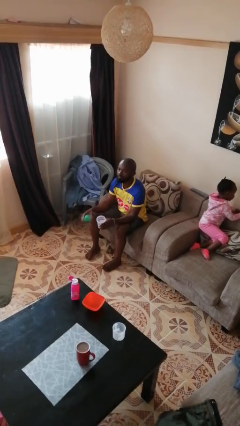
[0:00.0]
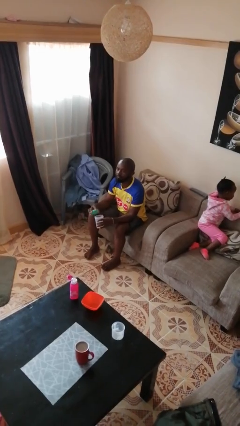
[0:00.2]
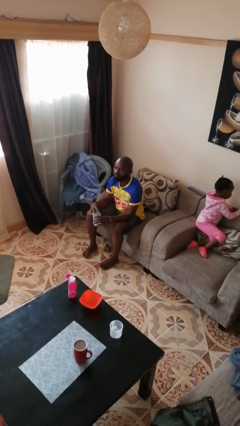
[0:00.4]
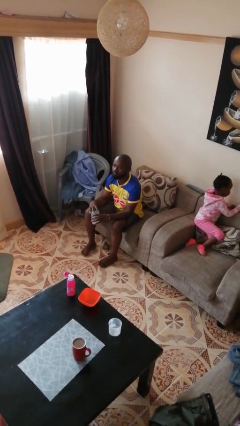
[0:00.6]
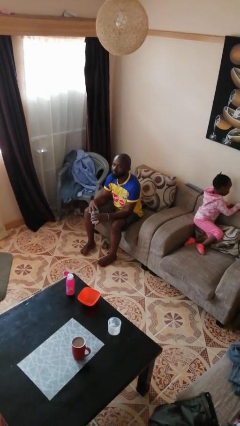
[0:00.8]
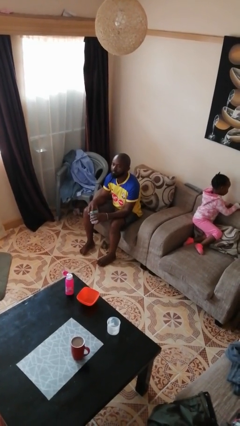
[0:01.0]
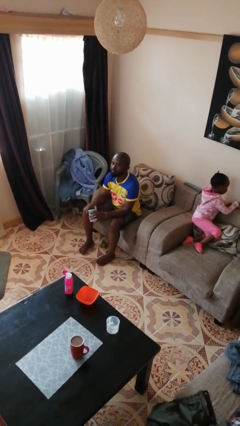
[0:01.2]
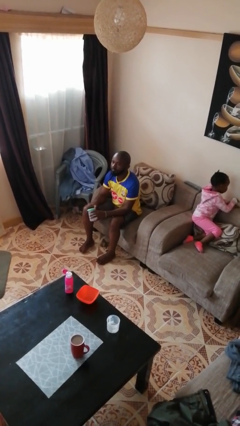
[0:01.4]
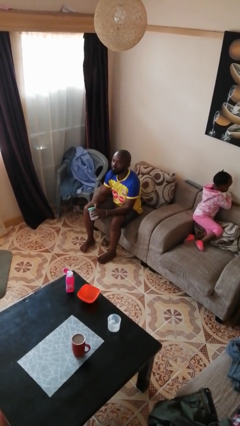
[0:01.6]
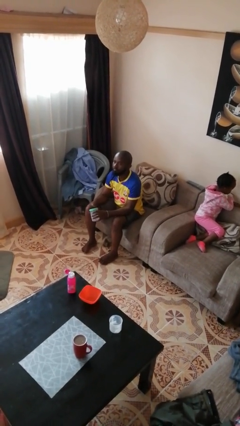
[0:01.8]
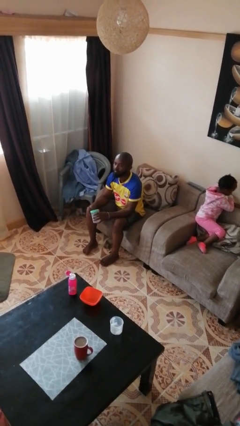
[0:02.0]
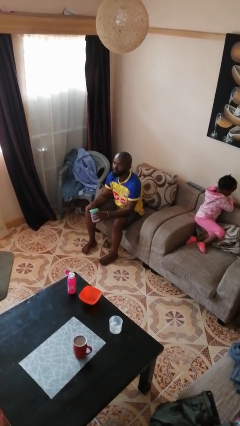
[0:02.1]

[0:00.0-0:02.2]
person closes jar

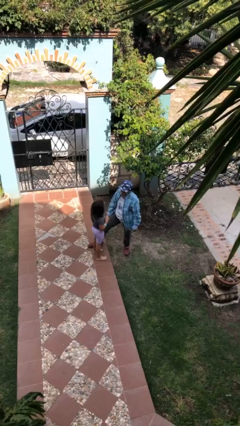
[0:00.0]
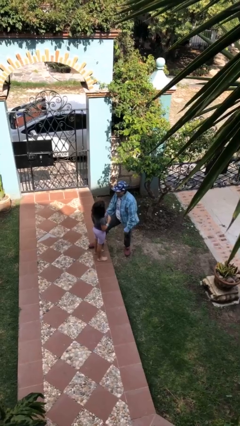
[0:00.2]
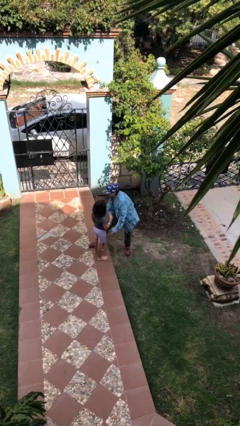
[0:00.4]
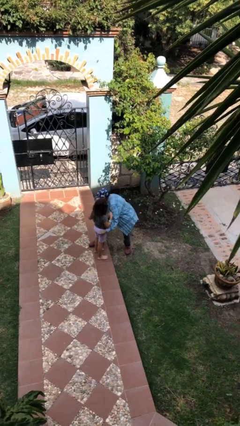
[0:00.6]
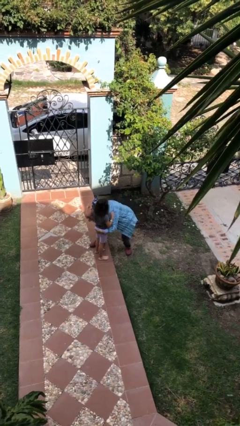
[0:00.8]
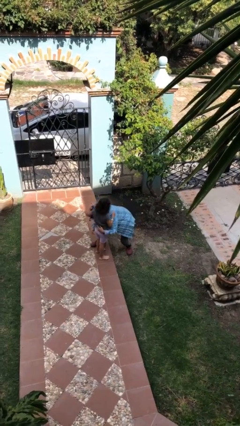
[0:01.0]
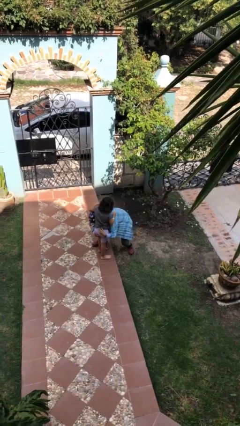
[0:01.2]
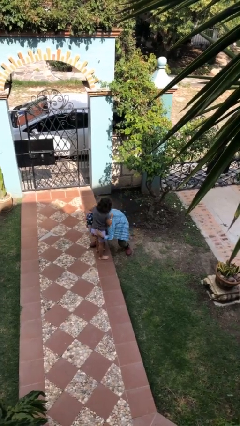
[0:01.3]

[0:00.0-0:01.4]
person carries person over shoulder

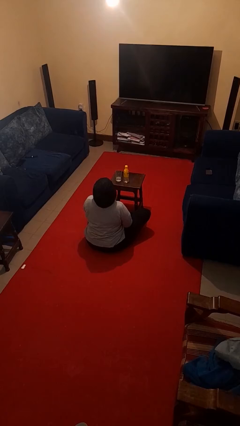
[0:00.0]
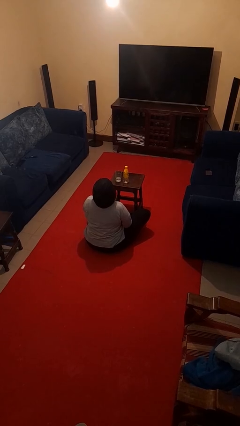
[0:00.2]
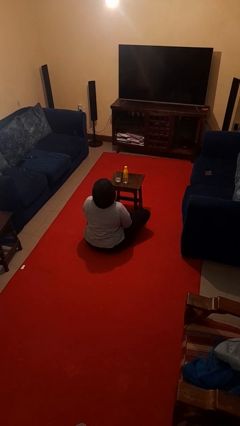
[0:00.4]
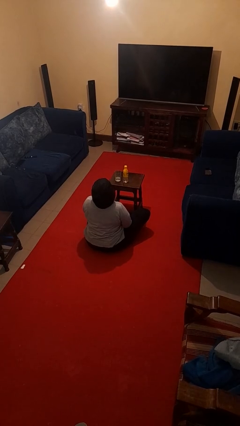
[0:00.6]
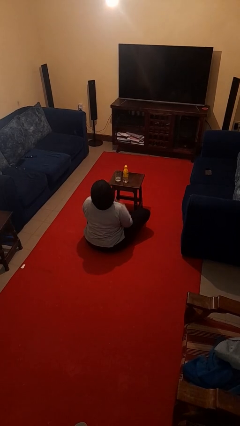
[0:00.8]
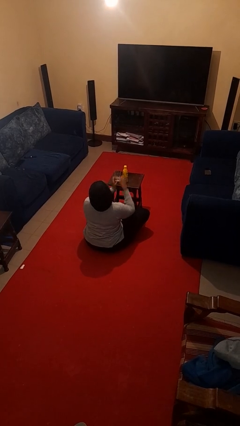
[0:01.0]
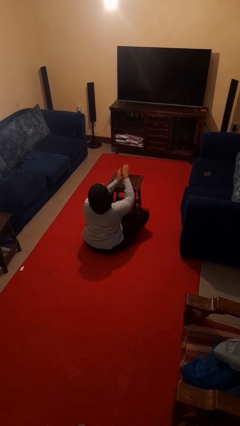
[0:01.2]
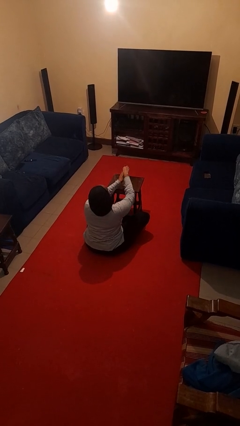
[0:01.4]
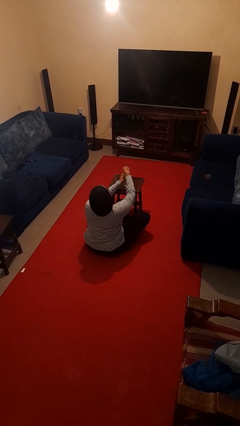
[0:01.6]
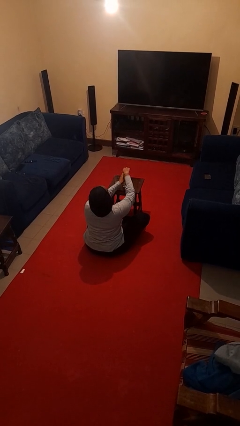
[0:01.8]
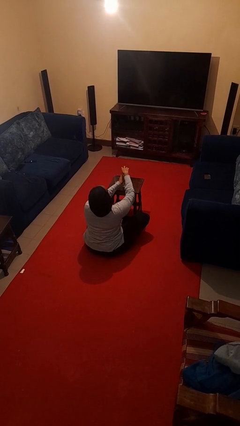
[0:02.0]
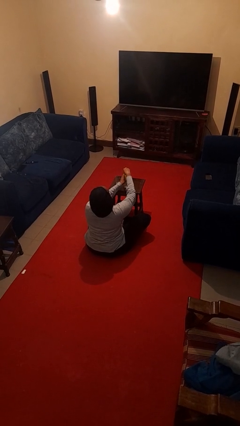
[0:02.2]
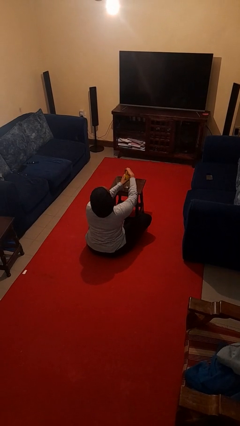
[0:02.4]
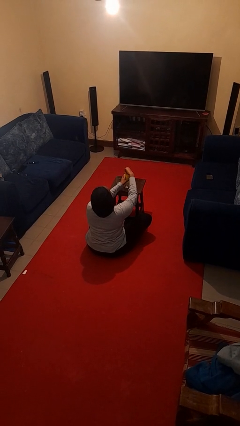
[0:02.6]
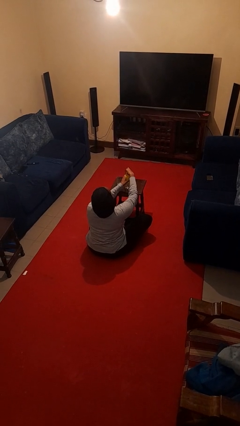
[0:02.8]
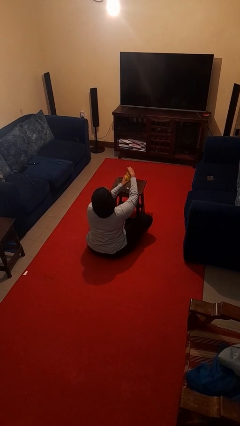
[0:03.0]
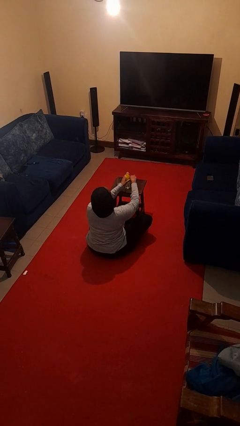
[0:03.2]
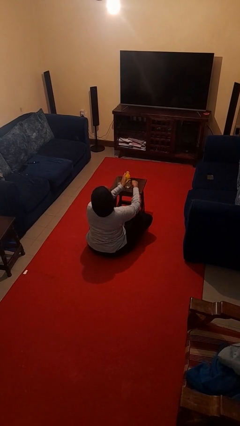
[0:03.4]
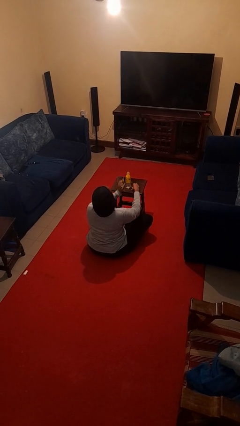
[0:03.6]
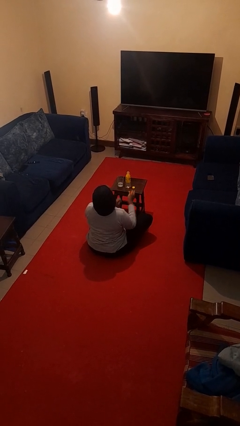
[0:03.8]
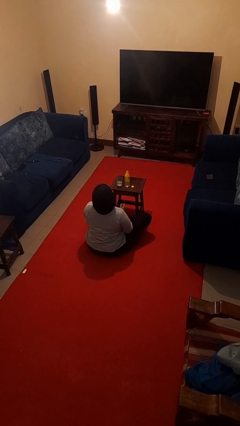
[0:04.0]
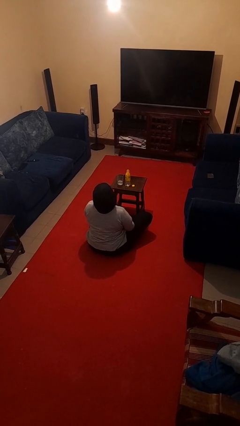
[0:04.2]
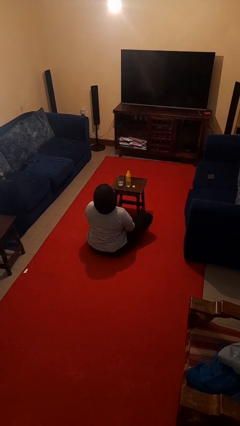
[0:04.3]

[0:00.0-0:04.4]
person unscrews lid from bottle

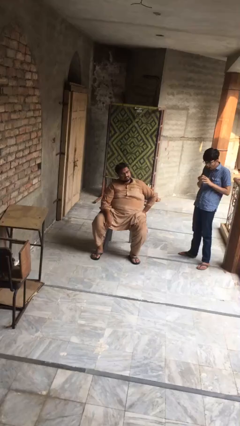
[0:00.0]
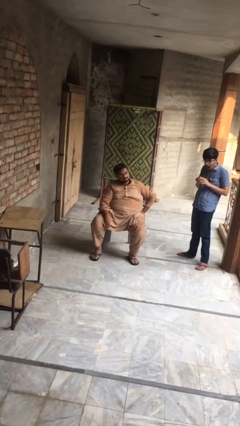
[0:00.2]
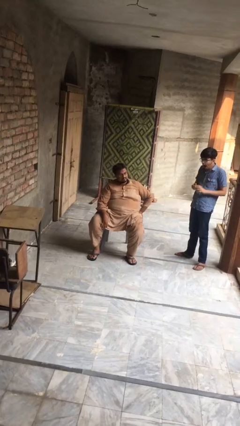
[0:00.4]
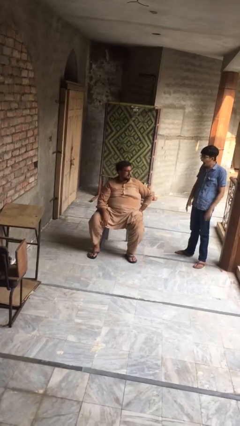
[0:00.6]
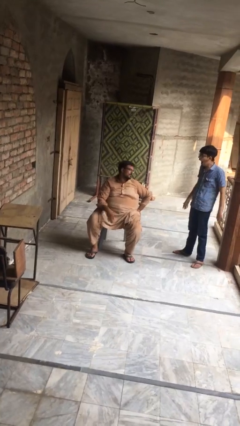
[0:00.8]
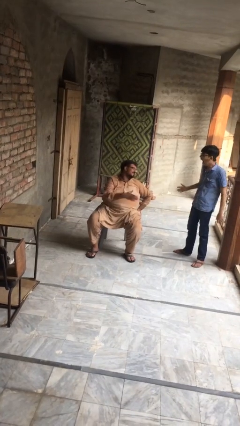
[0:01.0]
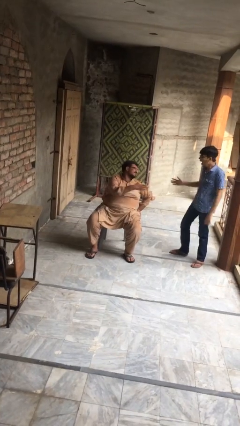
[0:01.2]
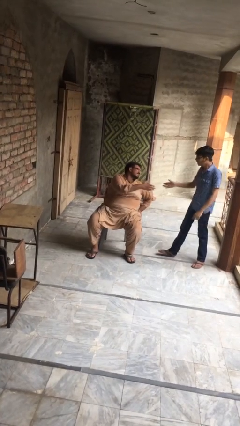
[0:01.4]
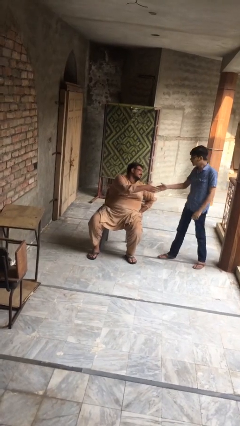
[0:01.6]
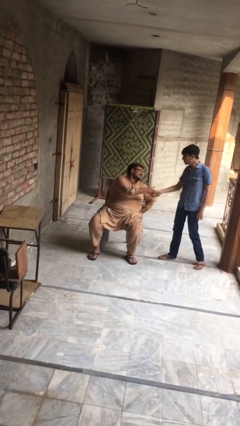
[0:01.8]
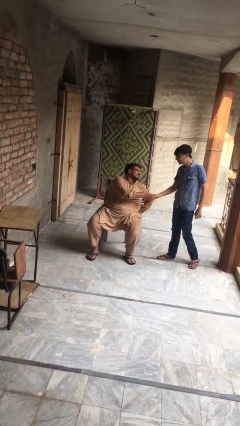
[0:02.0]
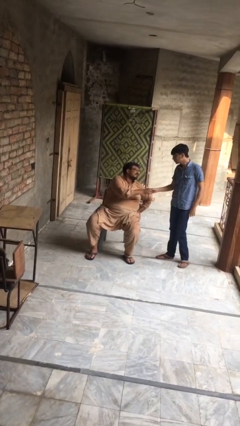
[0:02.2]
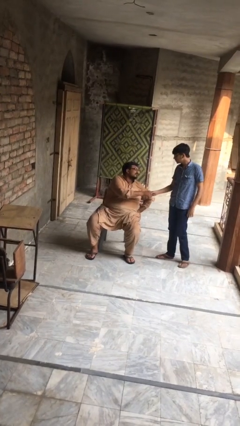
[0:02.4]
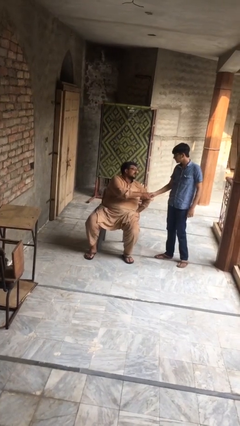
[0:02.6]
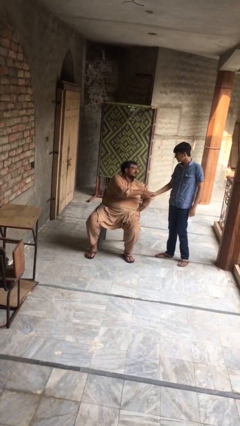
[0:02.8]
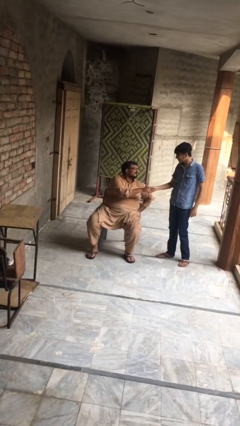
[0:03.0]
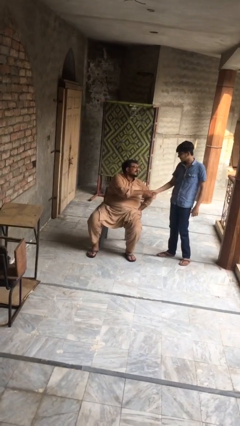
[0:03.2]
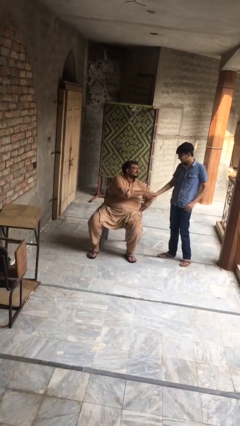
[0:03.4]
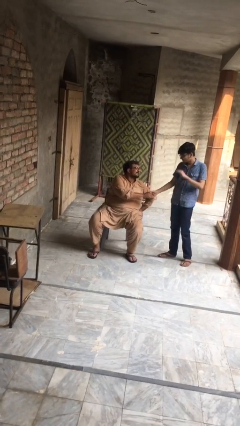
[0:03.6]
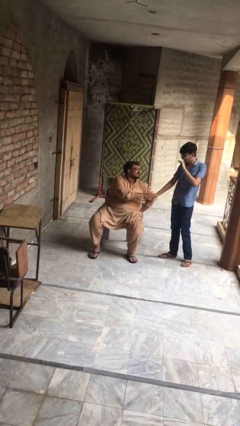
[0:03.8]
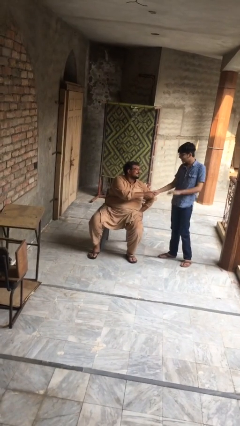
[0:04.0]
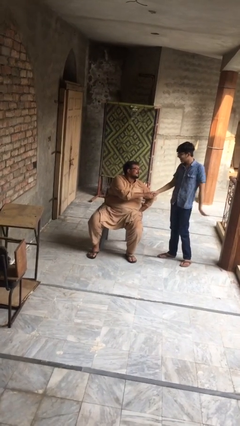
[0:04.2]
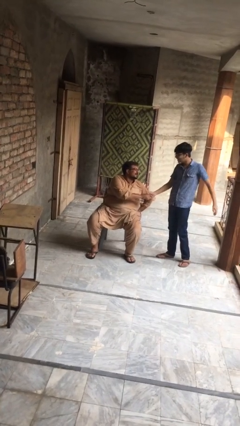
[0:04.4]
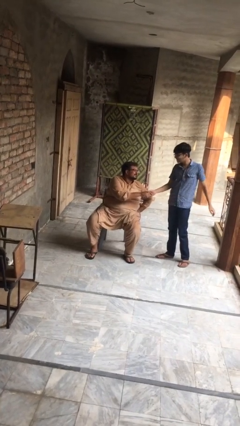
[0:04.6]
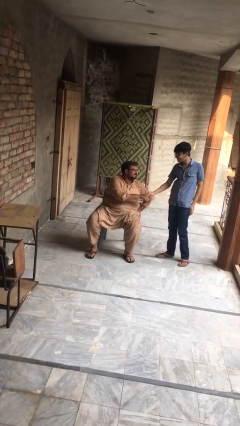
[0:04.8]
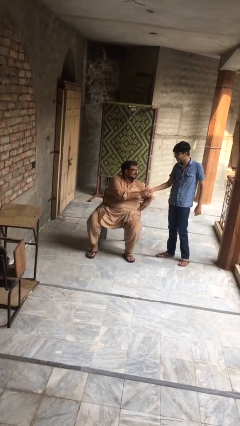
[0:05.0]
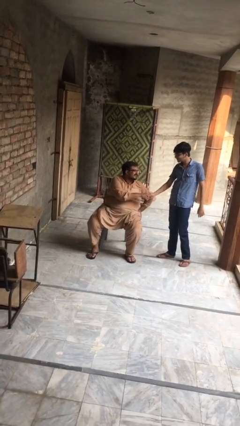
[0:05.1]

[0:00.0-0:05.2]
person shakes hand

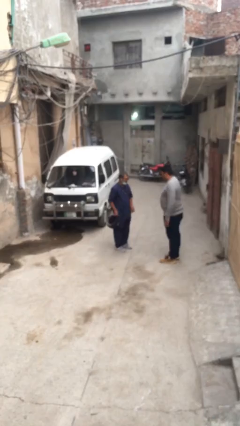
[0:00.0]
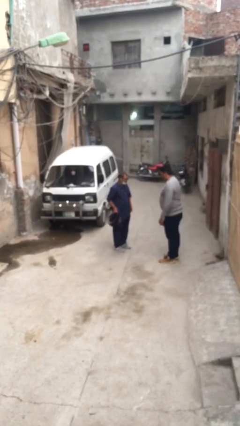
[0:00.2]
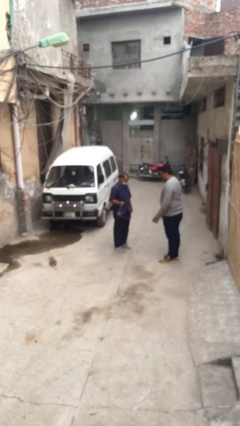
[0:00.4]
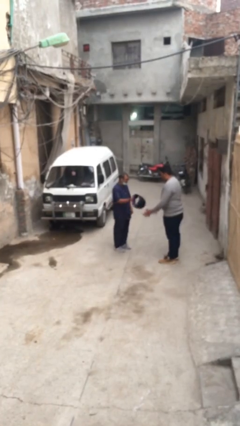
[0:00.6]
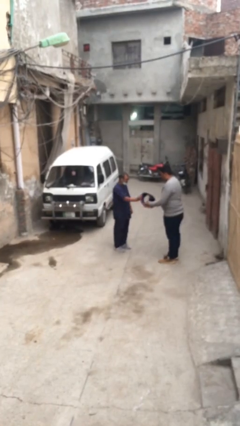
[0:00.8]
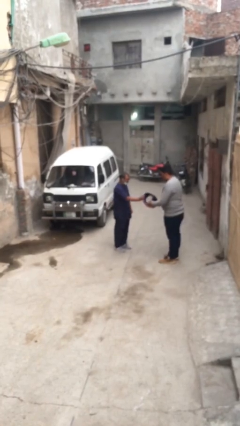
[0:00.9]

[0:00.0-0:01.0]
person transfers object to person

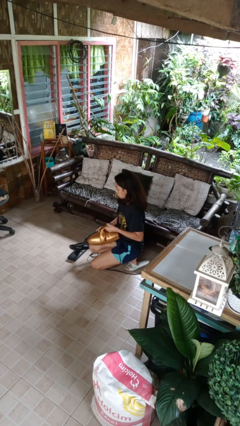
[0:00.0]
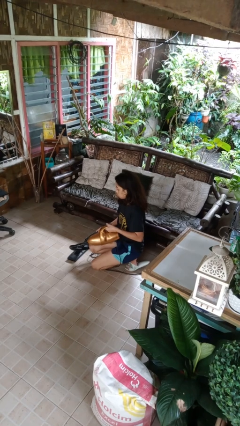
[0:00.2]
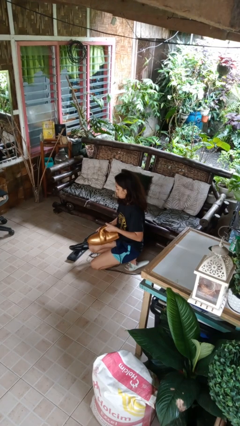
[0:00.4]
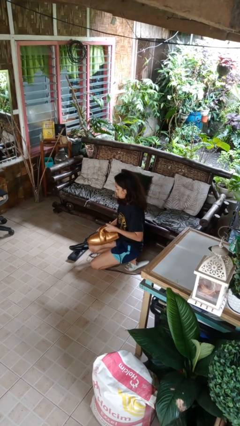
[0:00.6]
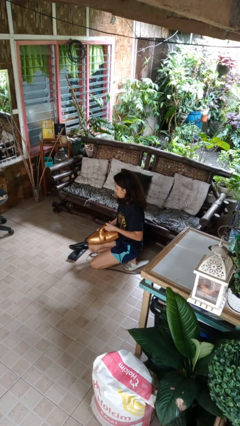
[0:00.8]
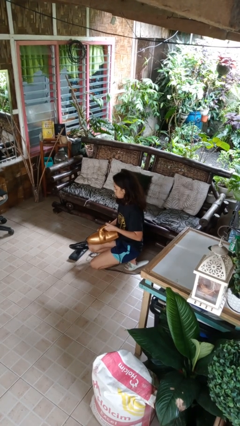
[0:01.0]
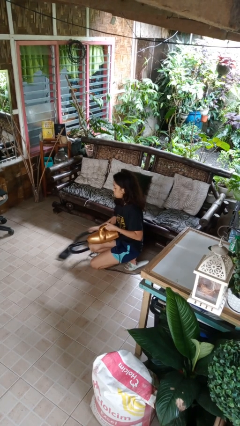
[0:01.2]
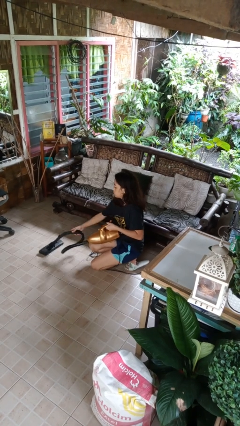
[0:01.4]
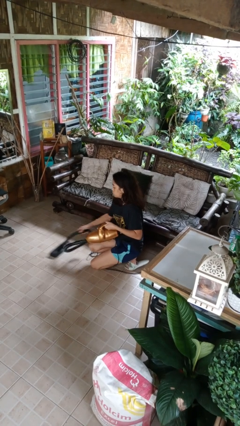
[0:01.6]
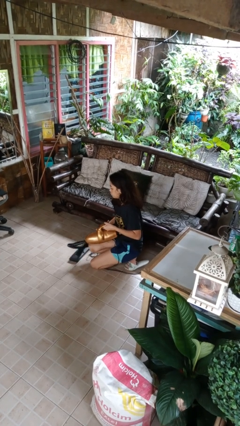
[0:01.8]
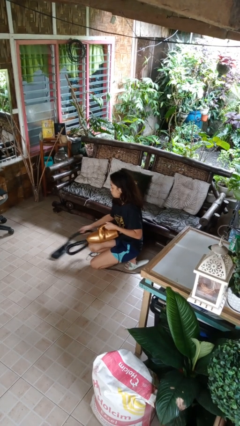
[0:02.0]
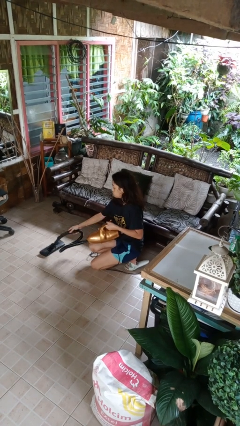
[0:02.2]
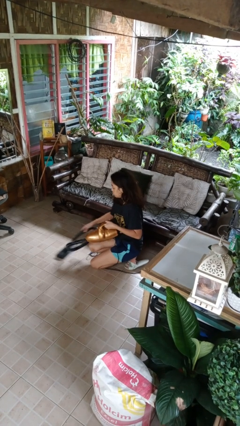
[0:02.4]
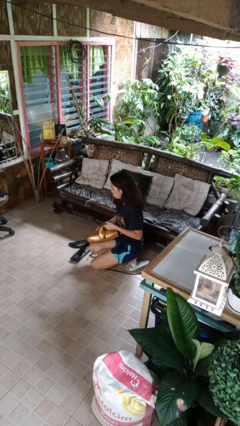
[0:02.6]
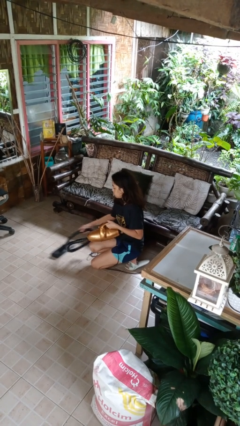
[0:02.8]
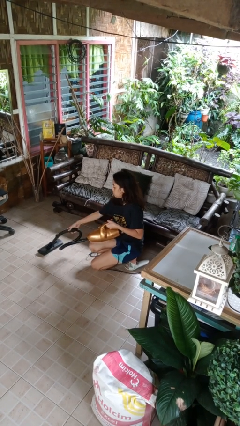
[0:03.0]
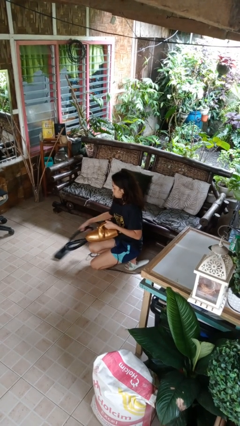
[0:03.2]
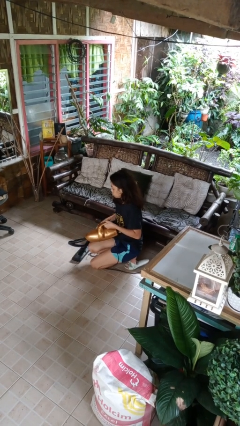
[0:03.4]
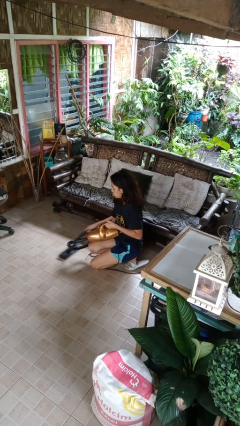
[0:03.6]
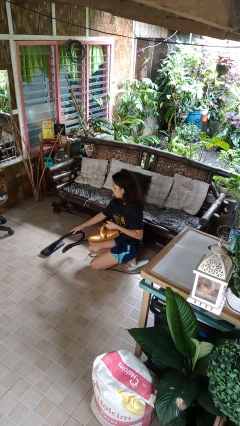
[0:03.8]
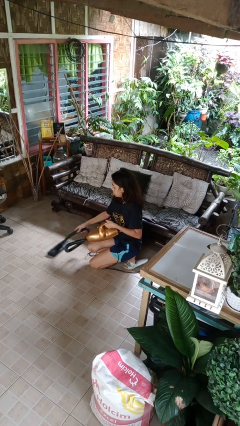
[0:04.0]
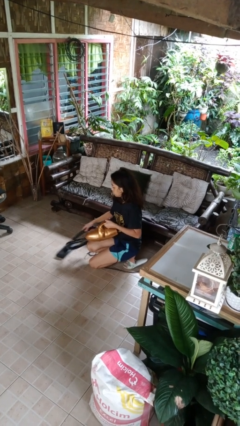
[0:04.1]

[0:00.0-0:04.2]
person vacuums carpet
